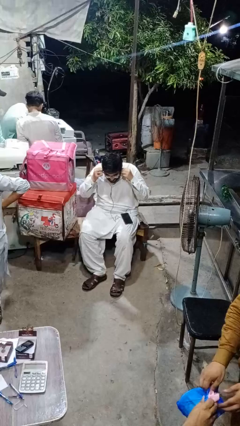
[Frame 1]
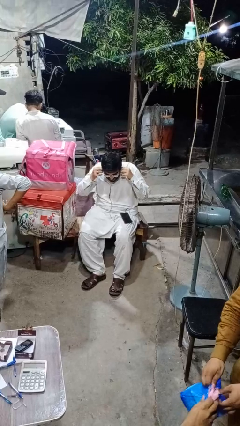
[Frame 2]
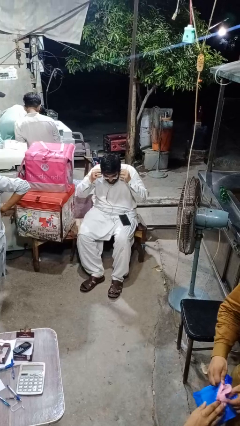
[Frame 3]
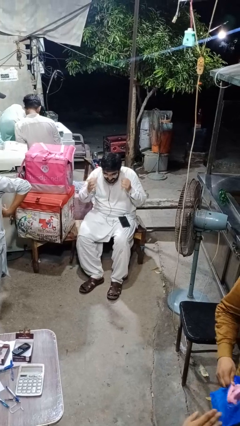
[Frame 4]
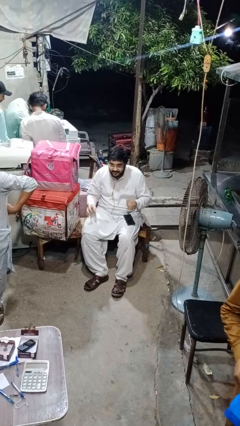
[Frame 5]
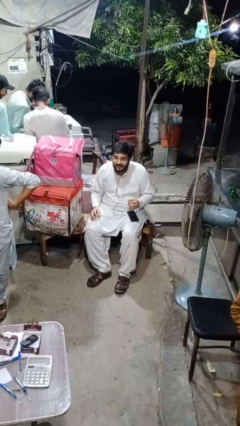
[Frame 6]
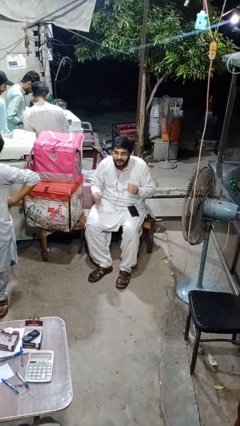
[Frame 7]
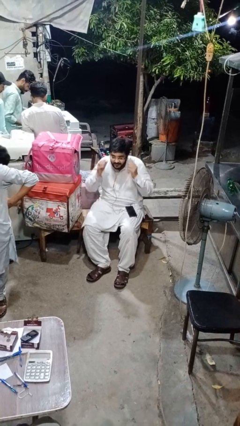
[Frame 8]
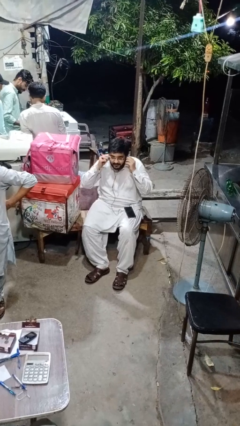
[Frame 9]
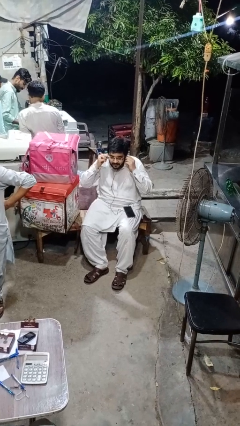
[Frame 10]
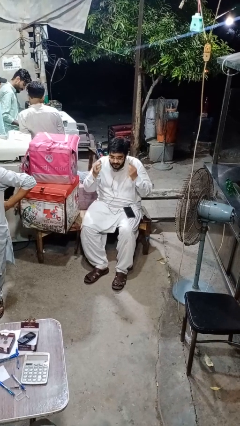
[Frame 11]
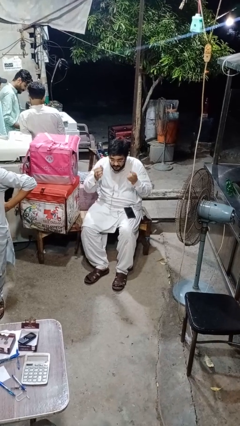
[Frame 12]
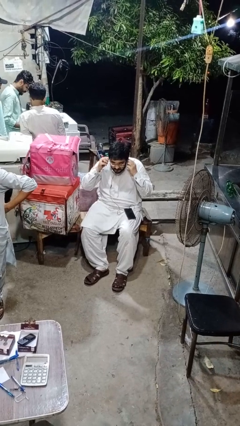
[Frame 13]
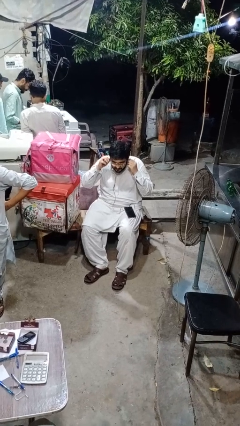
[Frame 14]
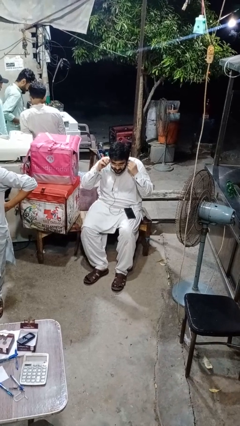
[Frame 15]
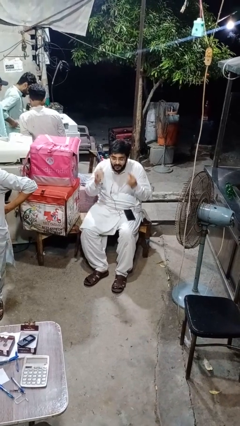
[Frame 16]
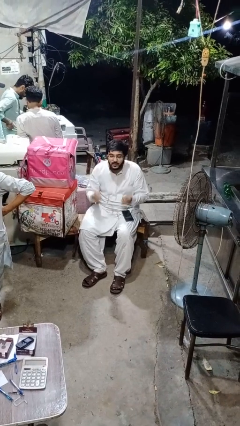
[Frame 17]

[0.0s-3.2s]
person puts on headphones

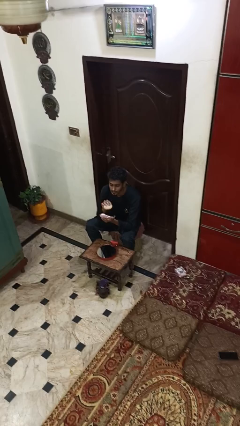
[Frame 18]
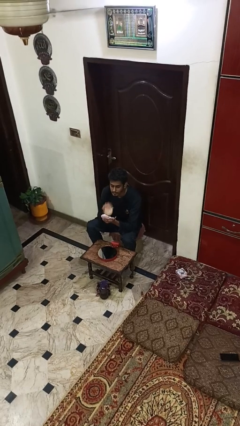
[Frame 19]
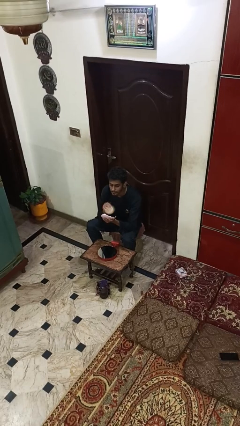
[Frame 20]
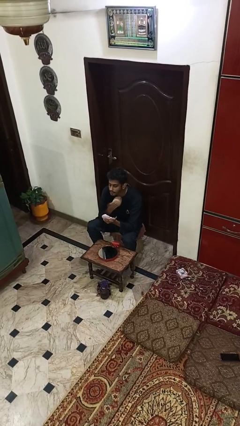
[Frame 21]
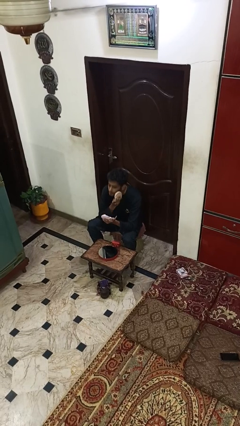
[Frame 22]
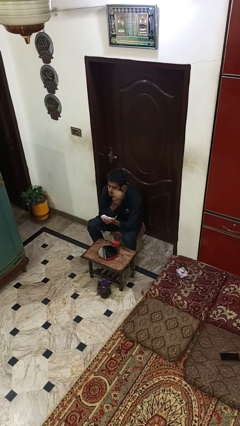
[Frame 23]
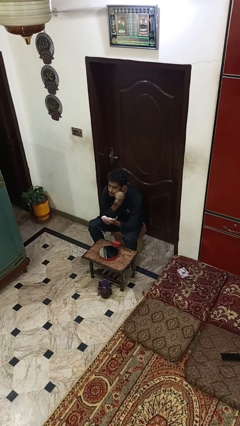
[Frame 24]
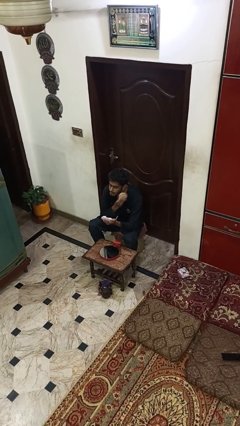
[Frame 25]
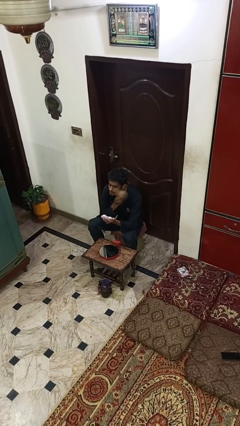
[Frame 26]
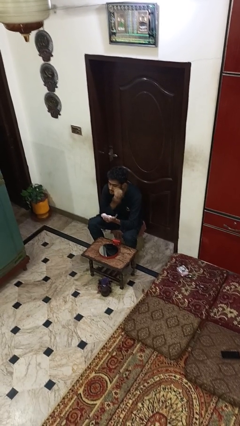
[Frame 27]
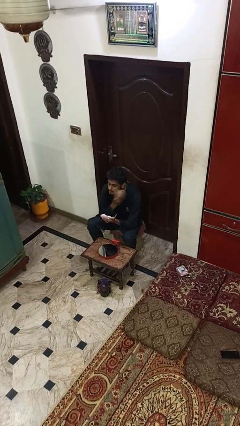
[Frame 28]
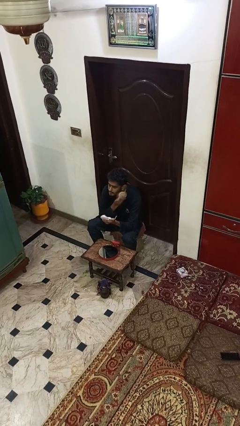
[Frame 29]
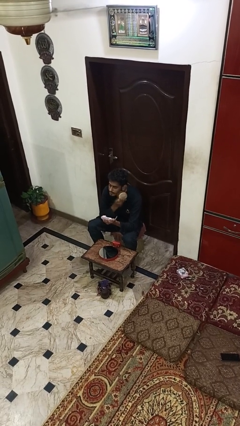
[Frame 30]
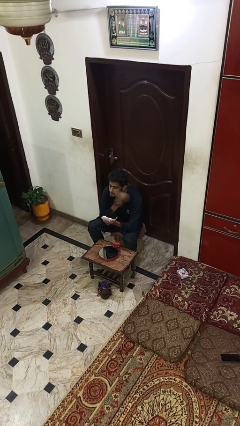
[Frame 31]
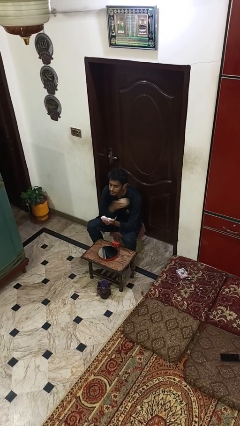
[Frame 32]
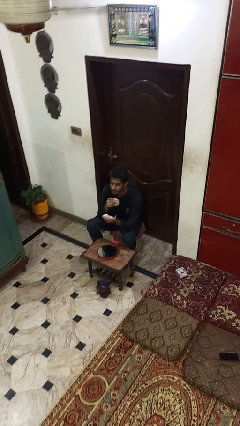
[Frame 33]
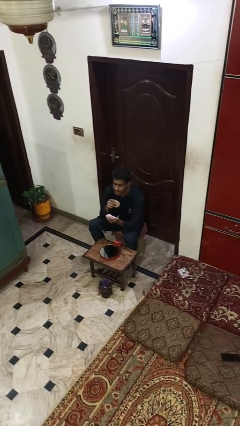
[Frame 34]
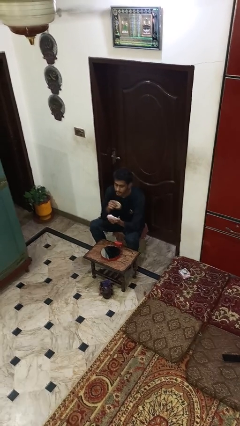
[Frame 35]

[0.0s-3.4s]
person applies foundation makeup

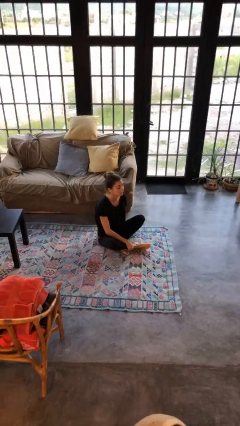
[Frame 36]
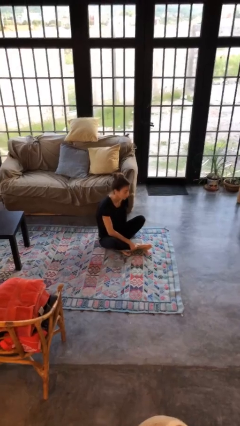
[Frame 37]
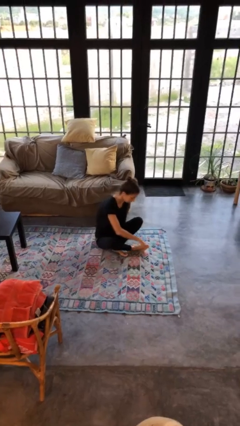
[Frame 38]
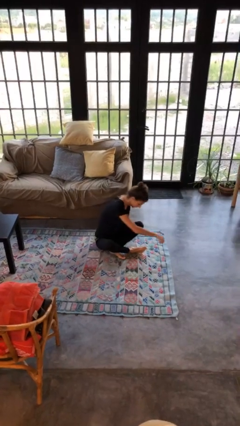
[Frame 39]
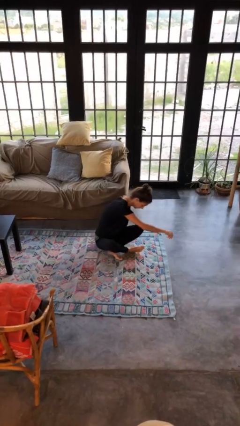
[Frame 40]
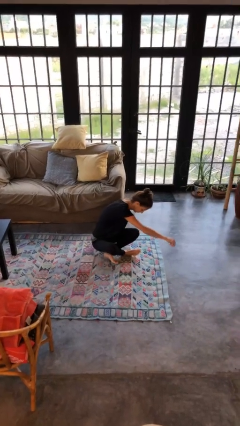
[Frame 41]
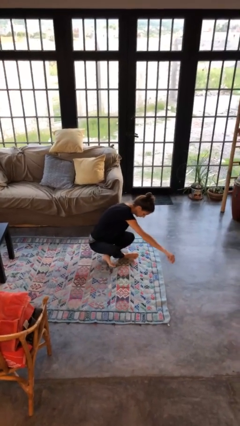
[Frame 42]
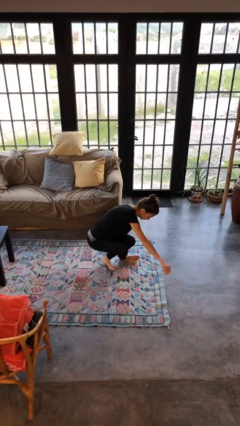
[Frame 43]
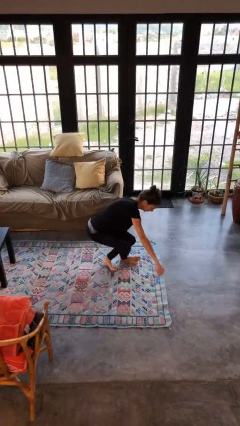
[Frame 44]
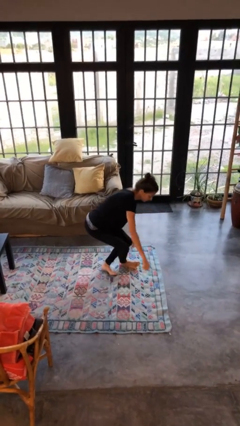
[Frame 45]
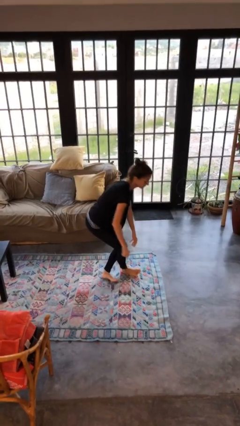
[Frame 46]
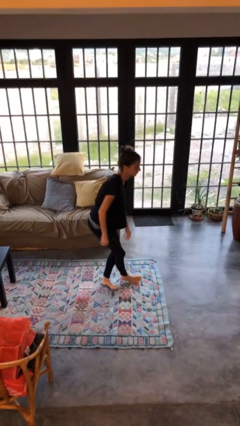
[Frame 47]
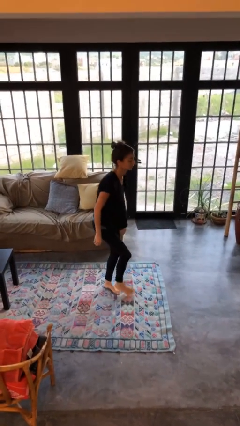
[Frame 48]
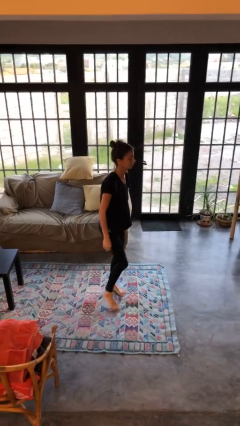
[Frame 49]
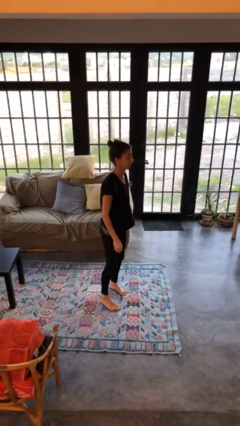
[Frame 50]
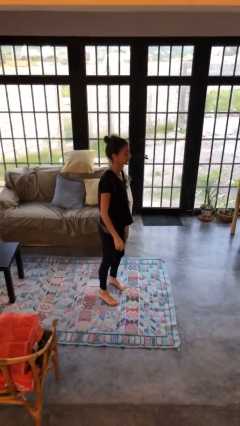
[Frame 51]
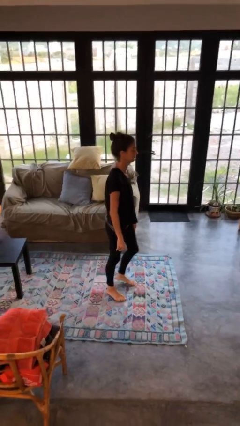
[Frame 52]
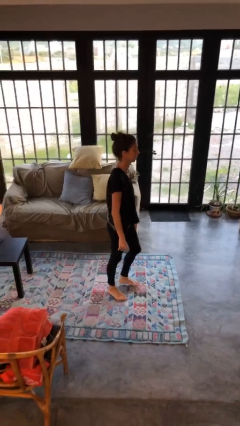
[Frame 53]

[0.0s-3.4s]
person stands up from floor

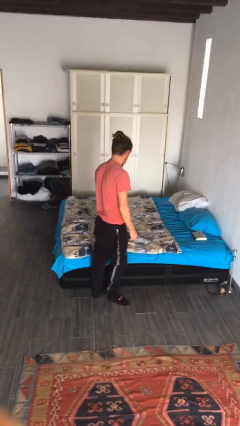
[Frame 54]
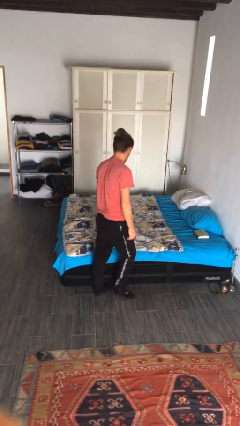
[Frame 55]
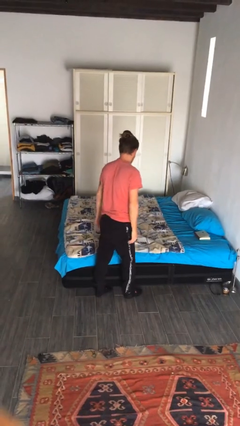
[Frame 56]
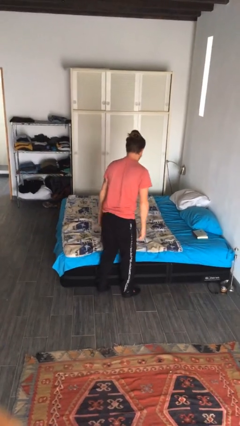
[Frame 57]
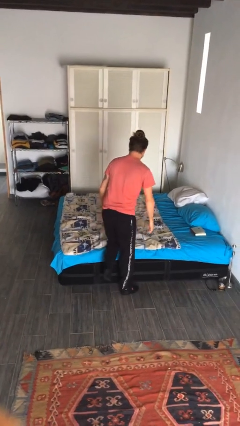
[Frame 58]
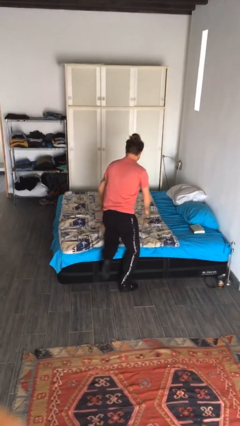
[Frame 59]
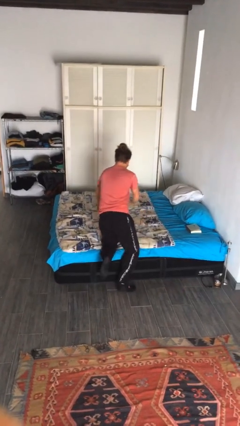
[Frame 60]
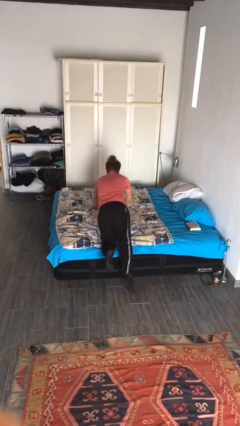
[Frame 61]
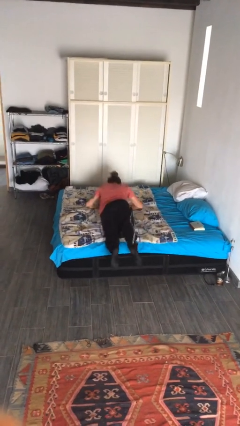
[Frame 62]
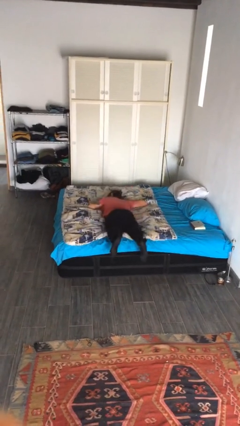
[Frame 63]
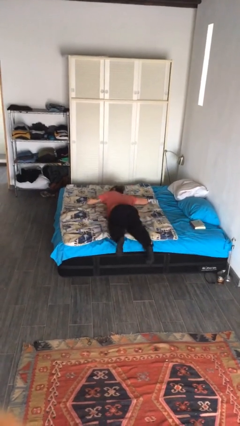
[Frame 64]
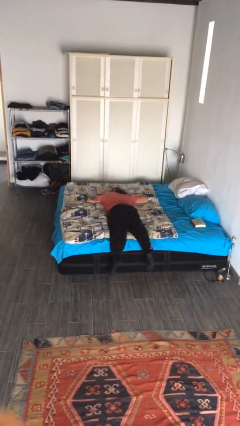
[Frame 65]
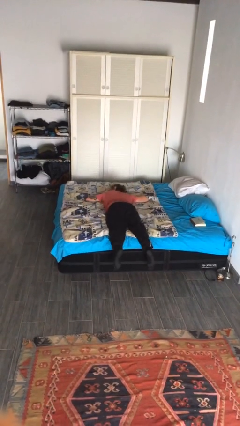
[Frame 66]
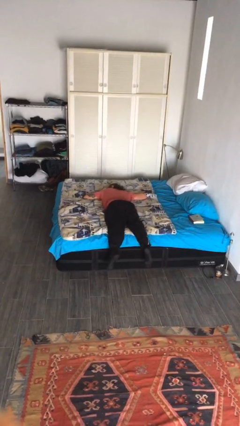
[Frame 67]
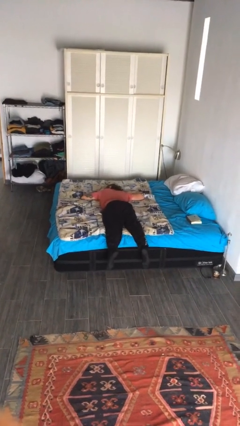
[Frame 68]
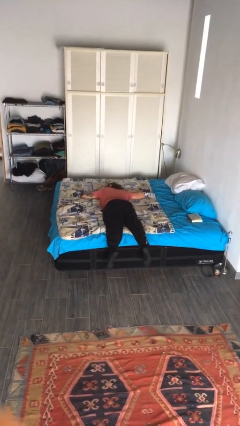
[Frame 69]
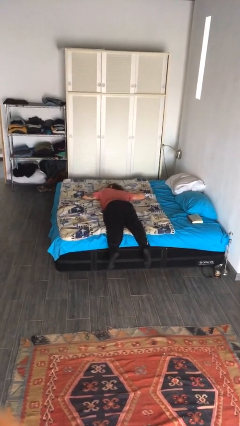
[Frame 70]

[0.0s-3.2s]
person lies down on bed

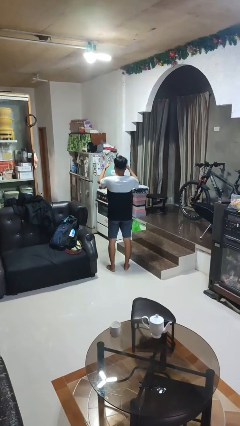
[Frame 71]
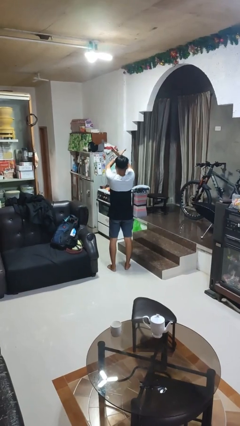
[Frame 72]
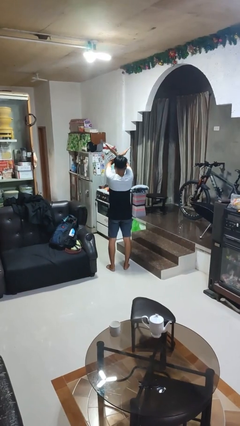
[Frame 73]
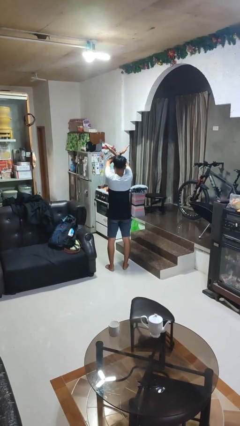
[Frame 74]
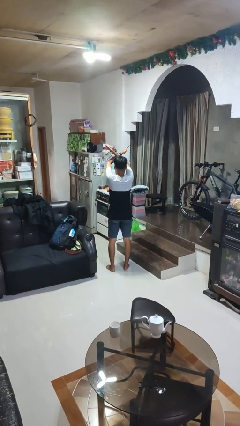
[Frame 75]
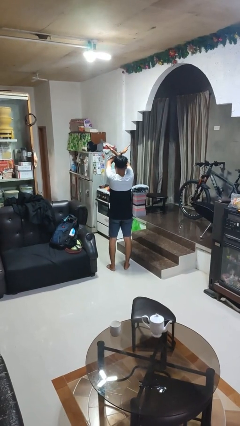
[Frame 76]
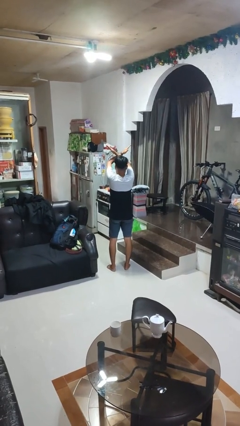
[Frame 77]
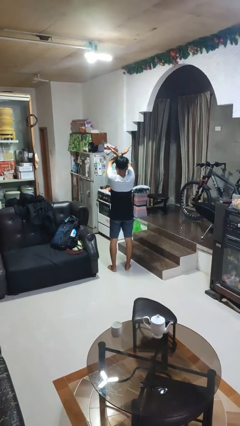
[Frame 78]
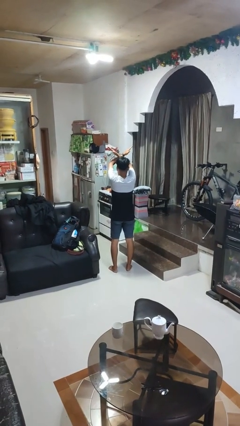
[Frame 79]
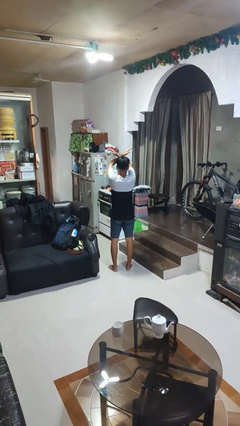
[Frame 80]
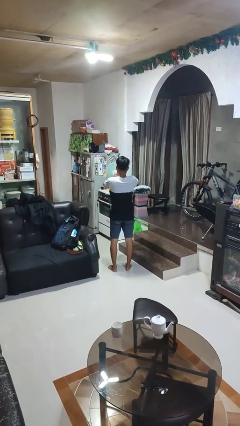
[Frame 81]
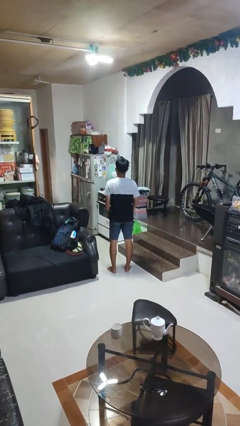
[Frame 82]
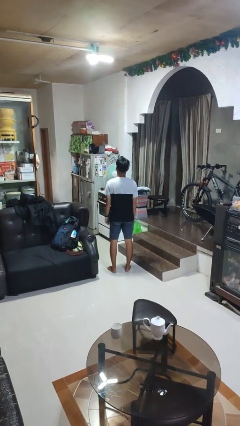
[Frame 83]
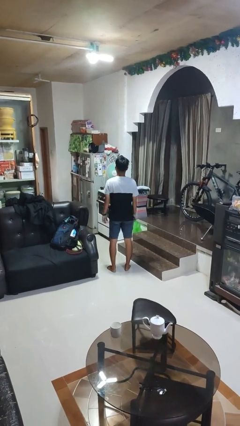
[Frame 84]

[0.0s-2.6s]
person gestures arms x

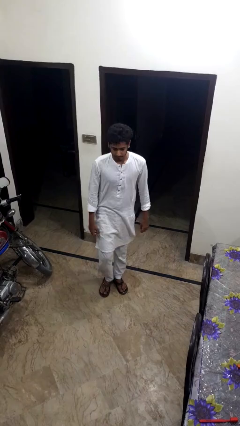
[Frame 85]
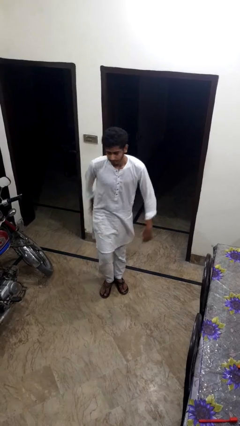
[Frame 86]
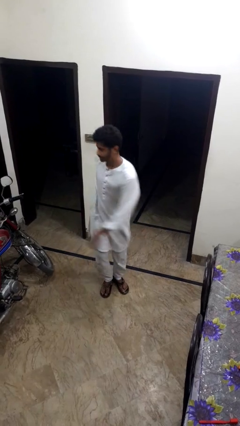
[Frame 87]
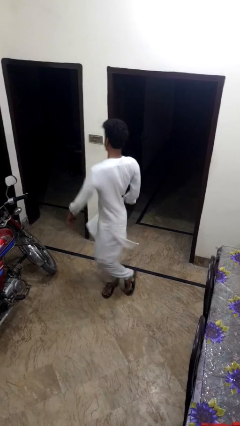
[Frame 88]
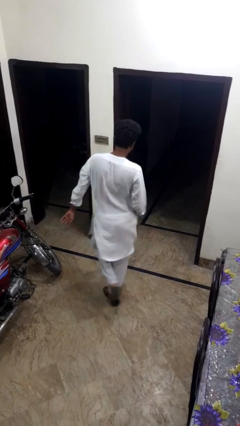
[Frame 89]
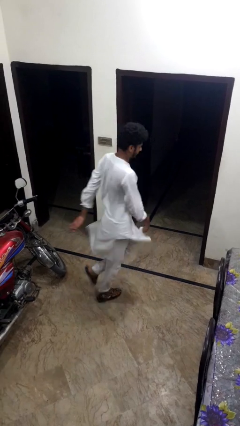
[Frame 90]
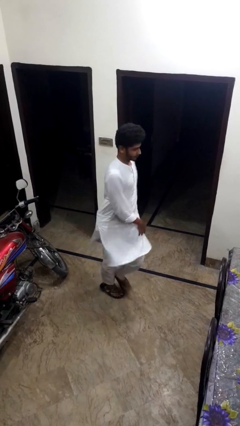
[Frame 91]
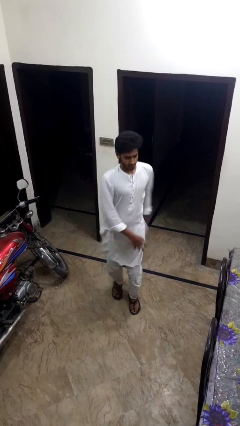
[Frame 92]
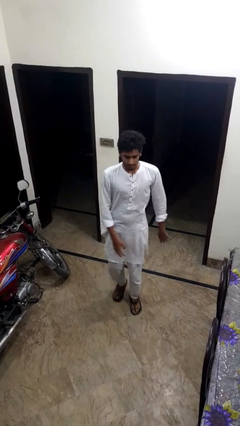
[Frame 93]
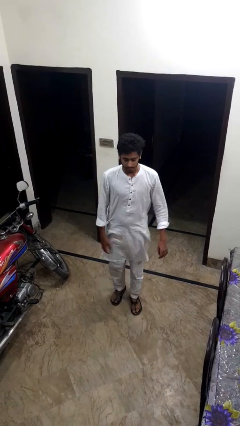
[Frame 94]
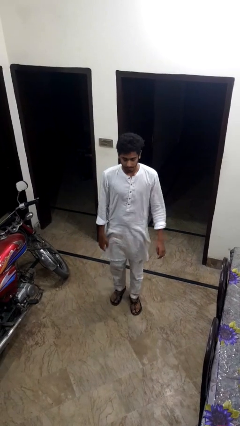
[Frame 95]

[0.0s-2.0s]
person twirls
